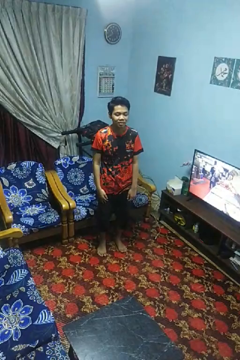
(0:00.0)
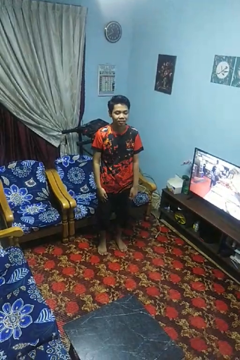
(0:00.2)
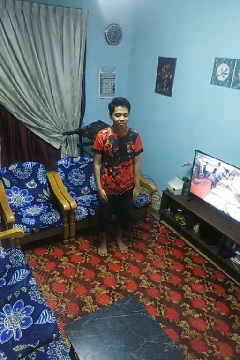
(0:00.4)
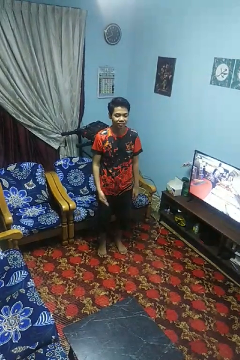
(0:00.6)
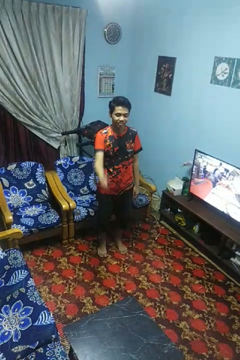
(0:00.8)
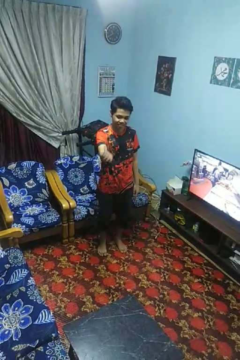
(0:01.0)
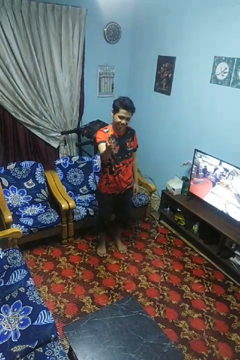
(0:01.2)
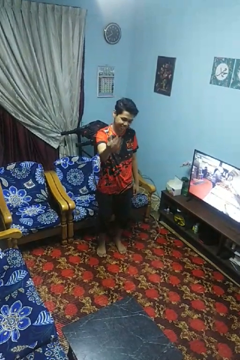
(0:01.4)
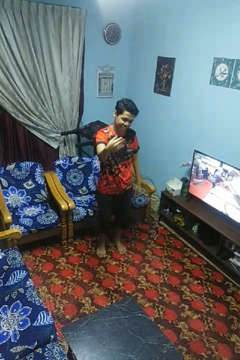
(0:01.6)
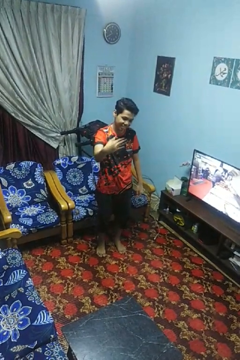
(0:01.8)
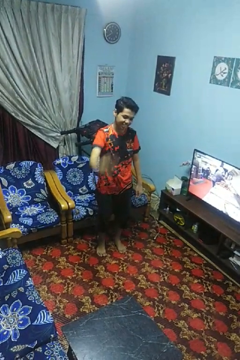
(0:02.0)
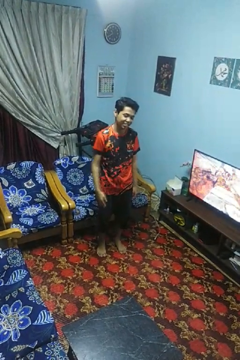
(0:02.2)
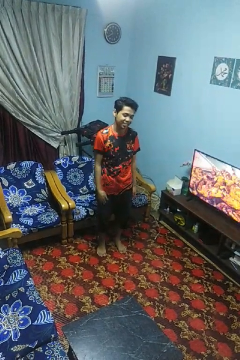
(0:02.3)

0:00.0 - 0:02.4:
person gestures come here

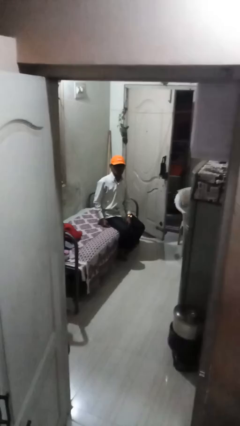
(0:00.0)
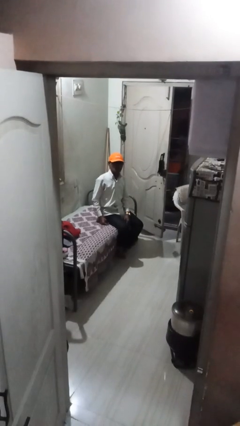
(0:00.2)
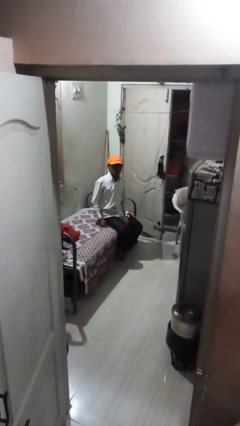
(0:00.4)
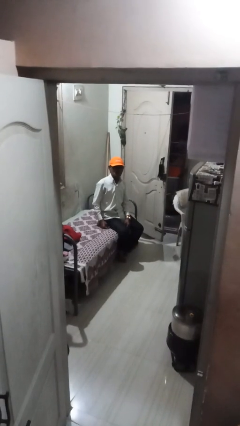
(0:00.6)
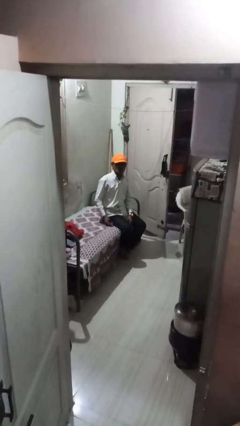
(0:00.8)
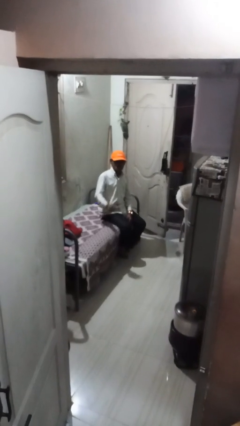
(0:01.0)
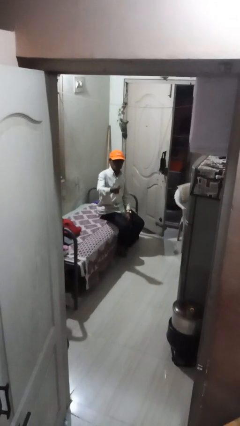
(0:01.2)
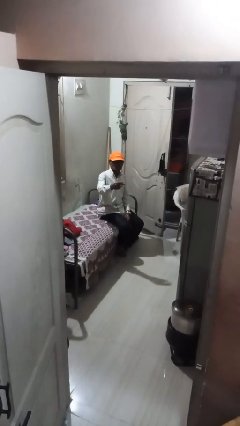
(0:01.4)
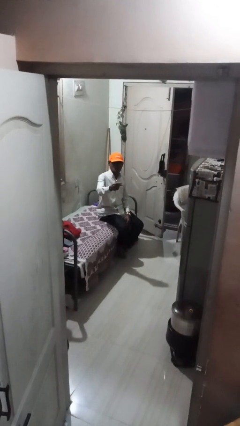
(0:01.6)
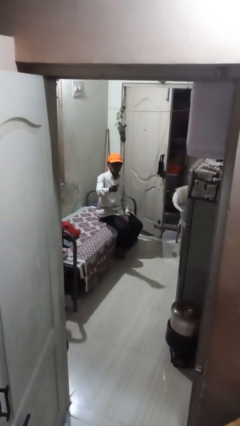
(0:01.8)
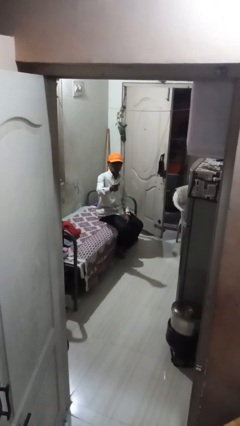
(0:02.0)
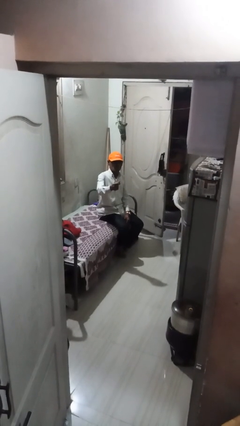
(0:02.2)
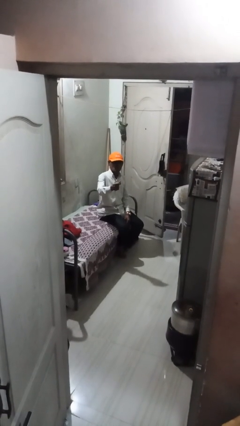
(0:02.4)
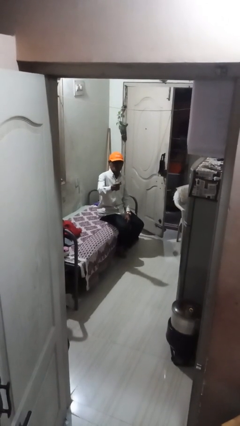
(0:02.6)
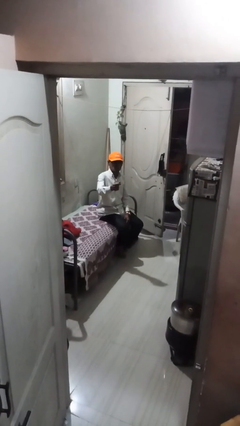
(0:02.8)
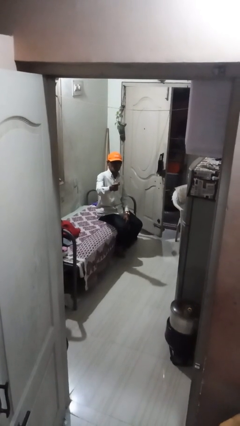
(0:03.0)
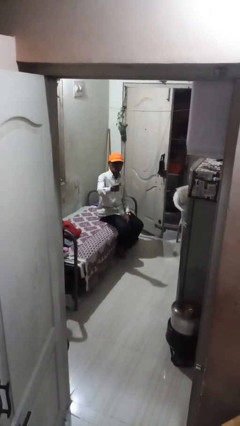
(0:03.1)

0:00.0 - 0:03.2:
person snaps fingers

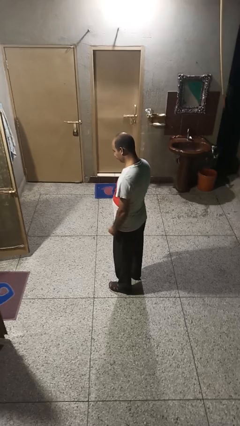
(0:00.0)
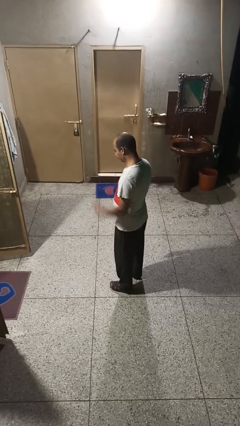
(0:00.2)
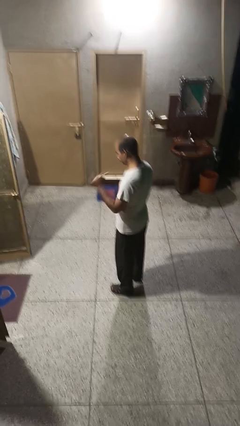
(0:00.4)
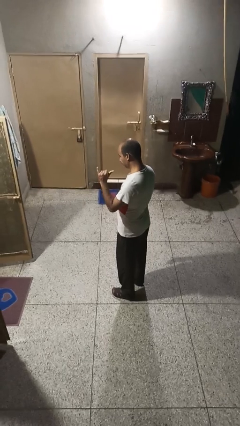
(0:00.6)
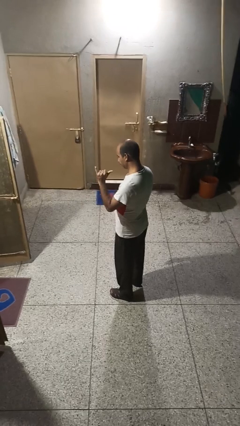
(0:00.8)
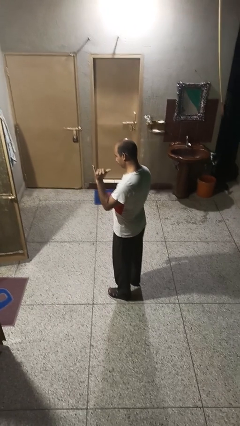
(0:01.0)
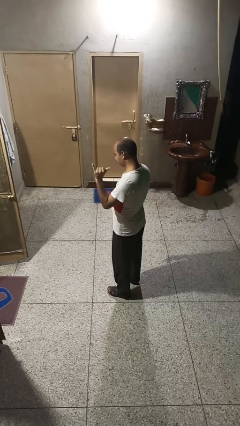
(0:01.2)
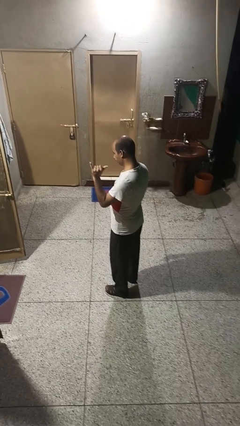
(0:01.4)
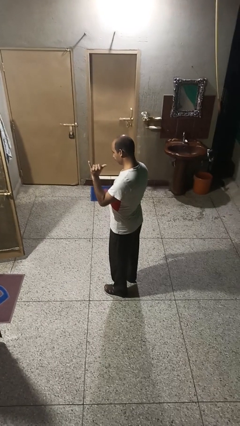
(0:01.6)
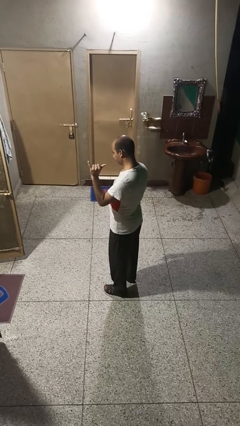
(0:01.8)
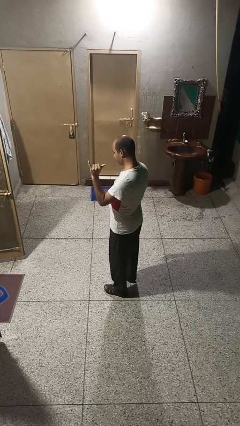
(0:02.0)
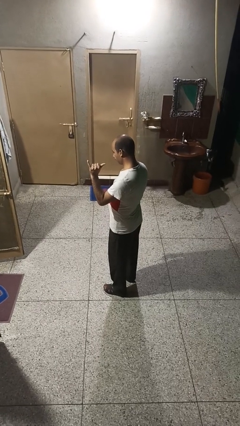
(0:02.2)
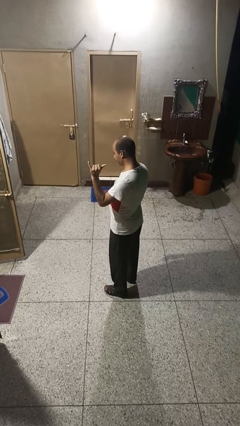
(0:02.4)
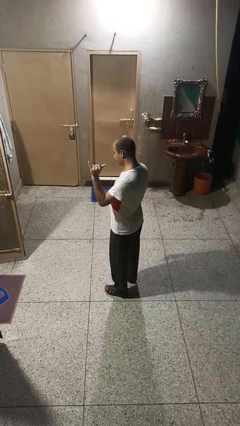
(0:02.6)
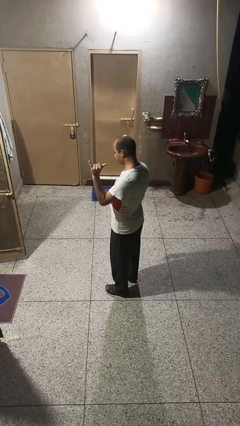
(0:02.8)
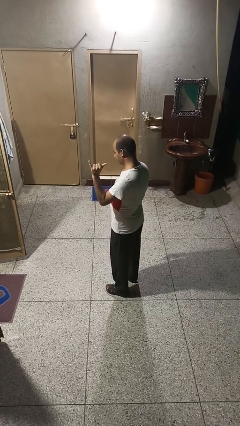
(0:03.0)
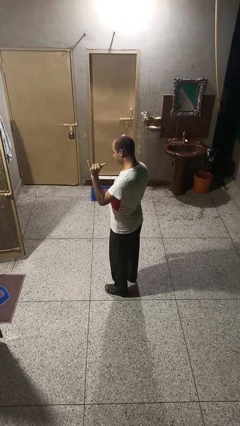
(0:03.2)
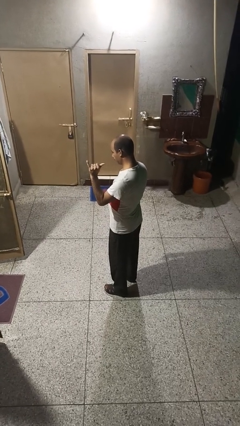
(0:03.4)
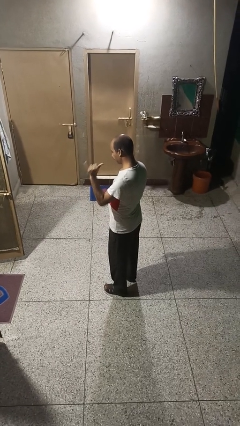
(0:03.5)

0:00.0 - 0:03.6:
person gestures hang loose

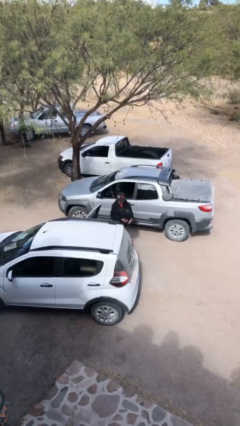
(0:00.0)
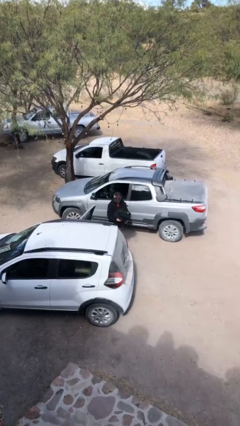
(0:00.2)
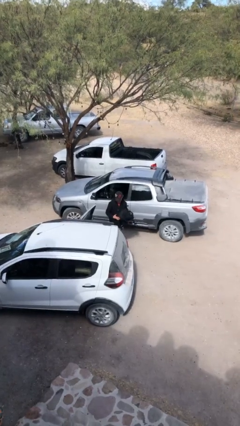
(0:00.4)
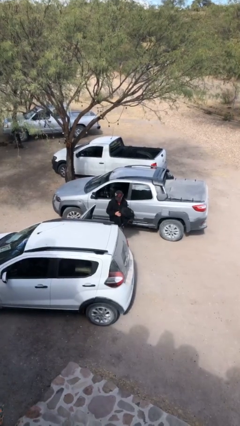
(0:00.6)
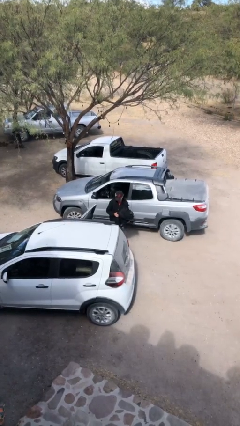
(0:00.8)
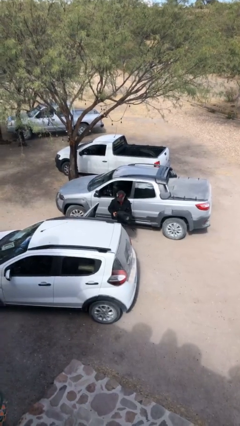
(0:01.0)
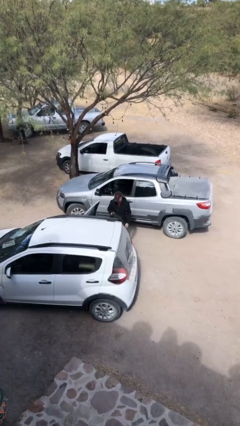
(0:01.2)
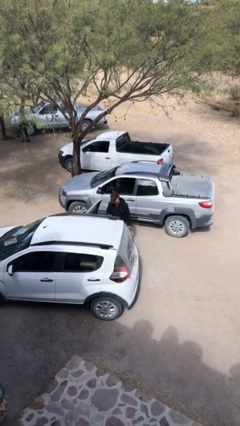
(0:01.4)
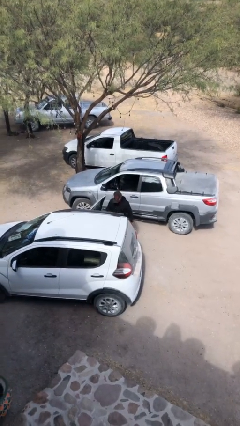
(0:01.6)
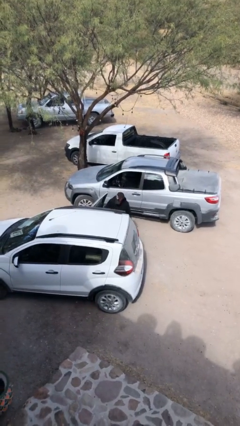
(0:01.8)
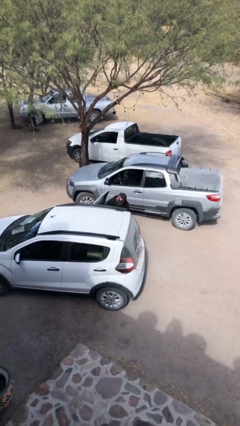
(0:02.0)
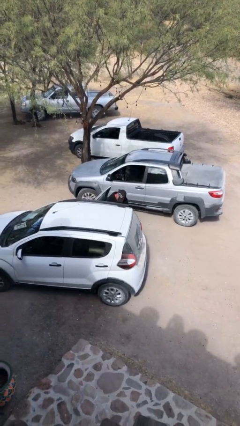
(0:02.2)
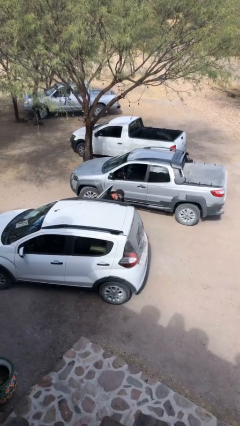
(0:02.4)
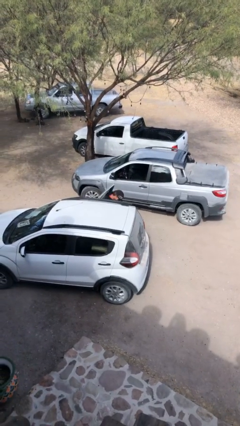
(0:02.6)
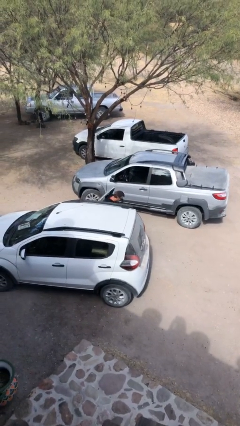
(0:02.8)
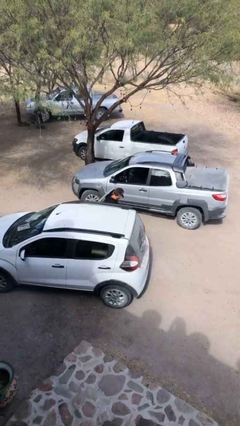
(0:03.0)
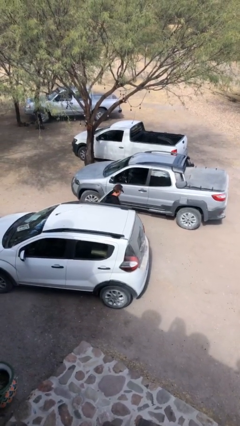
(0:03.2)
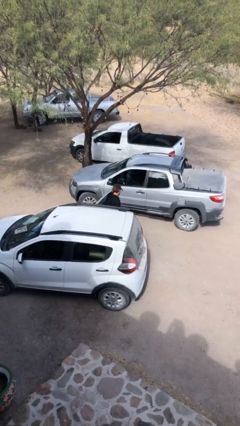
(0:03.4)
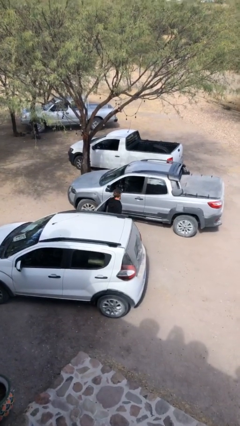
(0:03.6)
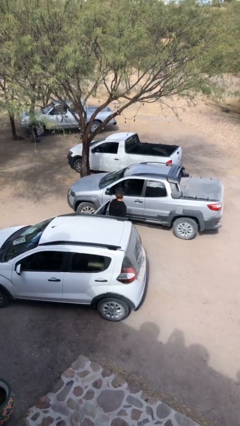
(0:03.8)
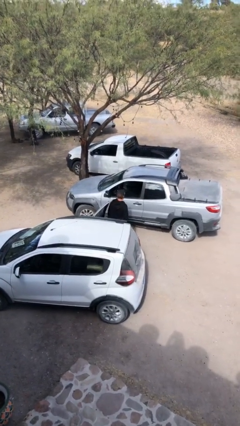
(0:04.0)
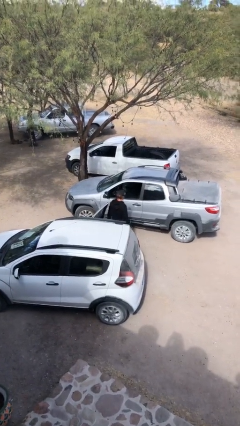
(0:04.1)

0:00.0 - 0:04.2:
person loads car

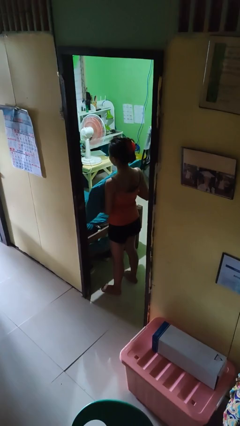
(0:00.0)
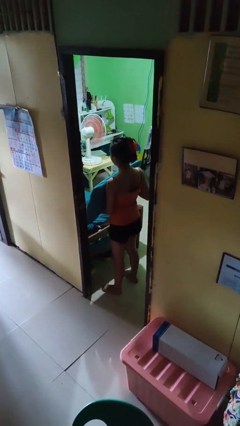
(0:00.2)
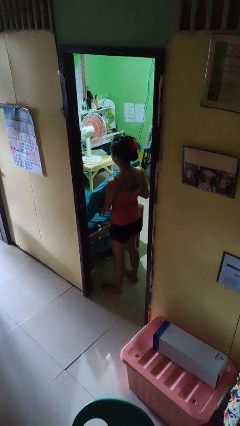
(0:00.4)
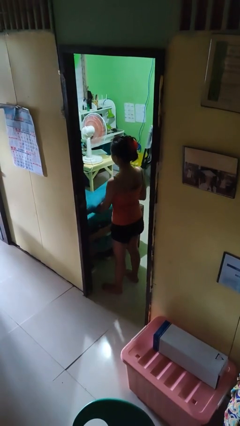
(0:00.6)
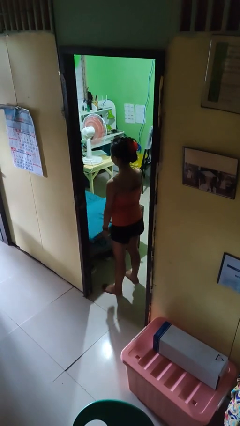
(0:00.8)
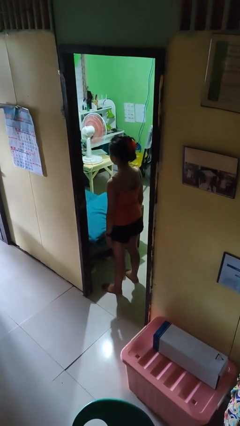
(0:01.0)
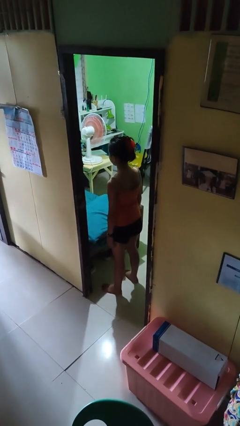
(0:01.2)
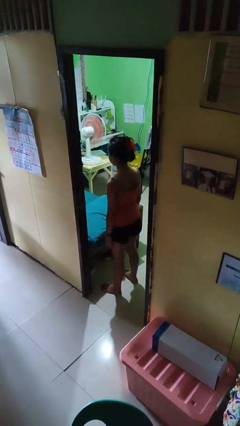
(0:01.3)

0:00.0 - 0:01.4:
person puts down object on bed

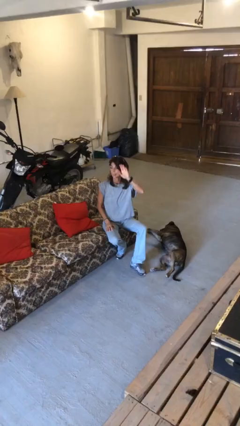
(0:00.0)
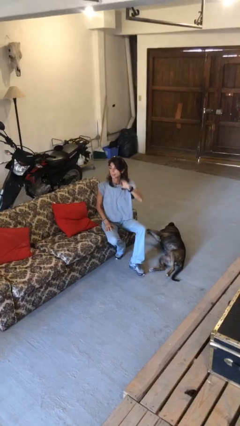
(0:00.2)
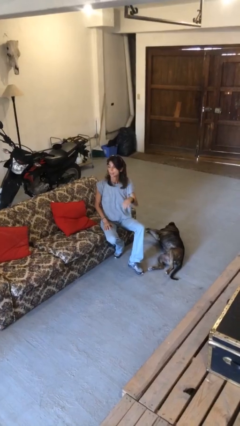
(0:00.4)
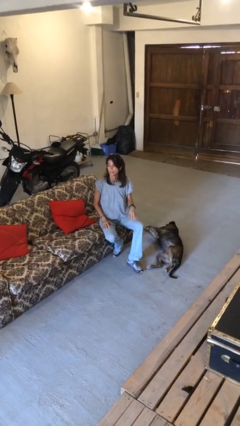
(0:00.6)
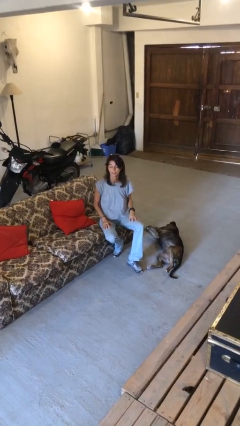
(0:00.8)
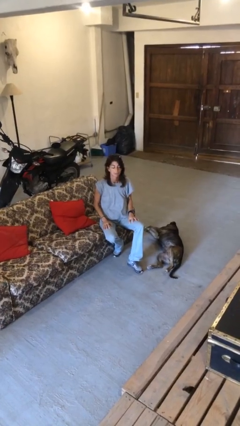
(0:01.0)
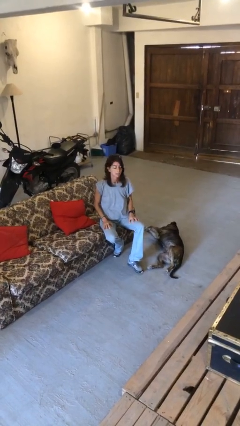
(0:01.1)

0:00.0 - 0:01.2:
person gestures lower hand

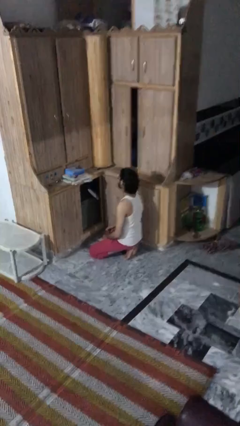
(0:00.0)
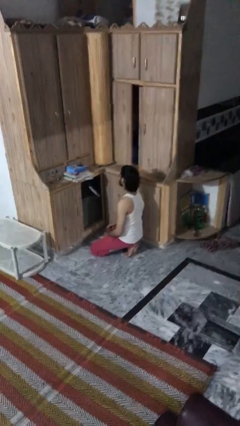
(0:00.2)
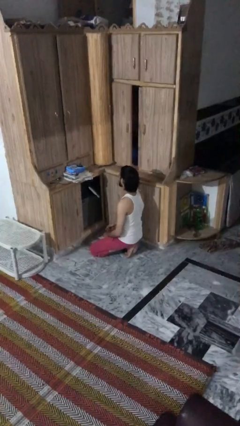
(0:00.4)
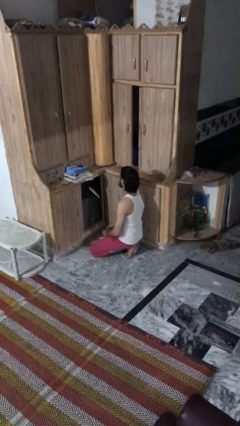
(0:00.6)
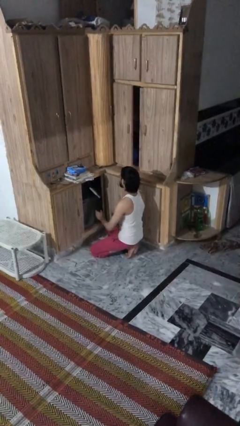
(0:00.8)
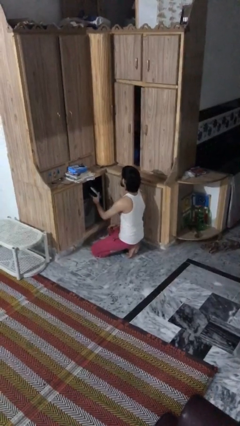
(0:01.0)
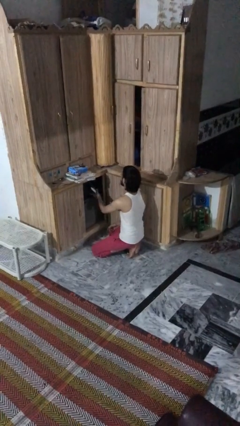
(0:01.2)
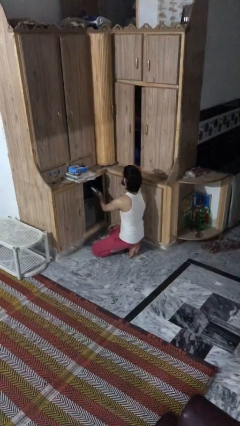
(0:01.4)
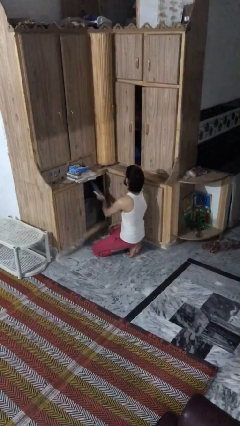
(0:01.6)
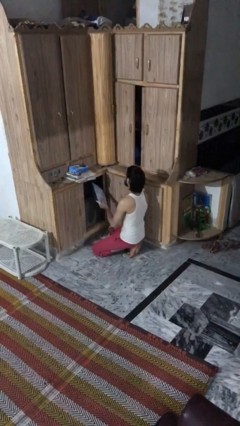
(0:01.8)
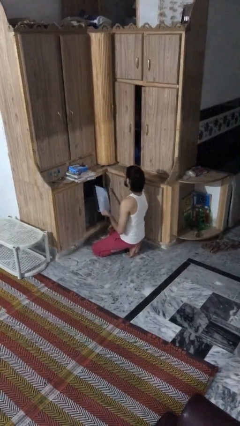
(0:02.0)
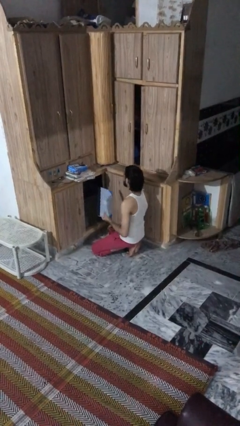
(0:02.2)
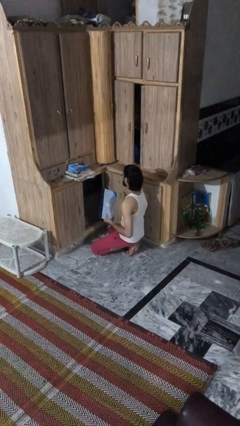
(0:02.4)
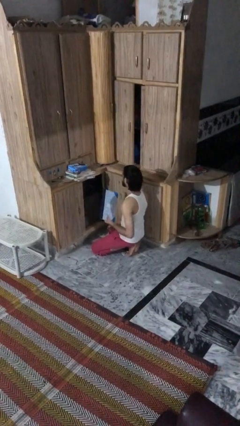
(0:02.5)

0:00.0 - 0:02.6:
person picks up object from cabinet
